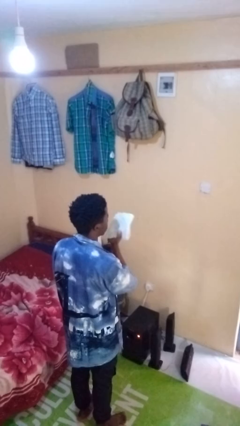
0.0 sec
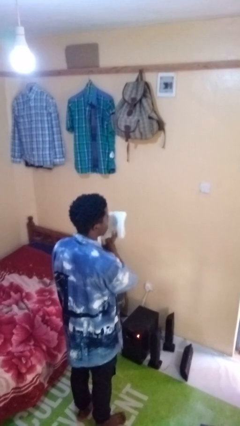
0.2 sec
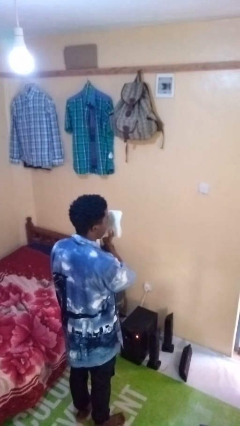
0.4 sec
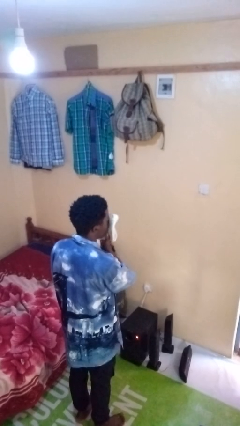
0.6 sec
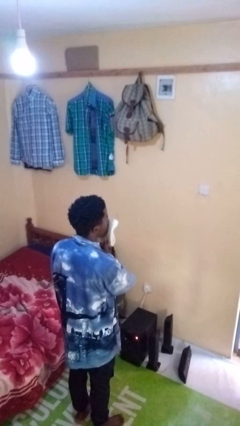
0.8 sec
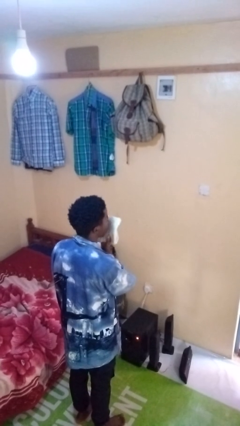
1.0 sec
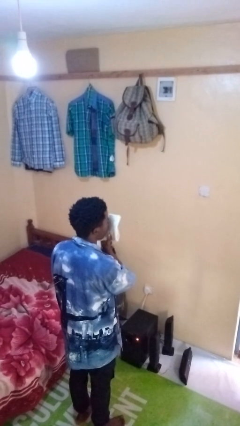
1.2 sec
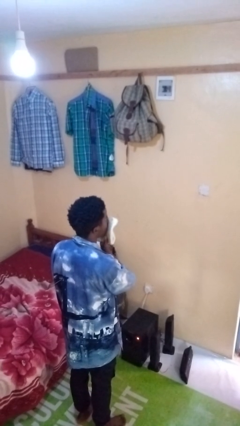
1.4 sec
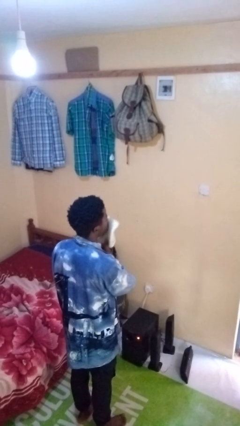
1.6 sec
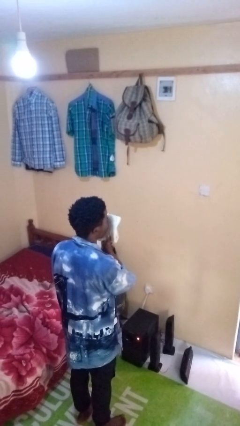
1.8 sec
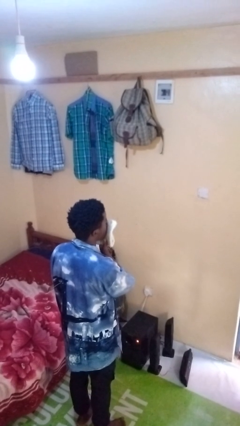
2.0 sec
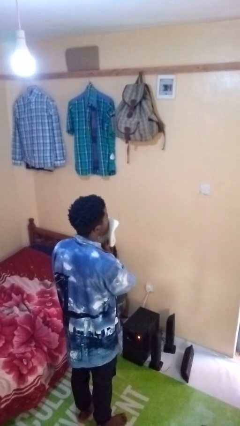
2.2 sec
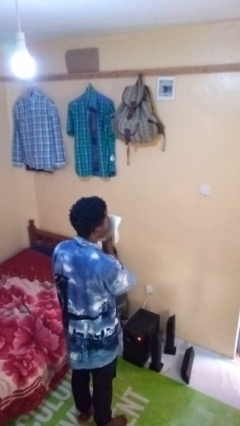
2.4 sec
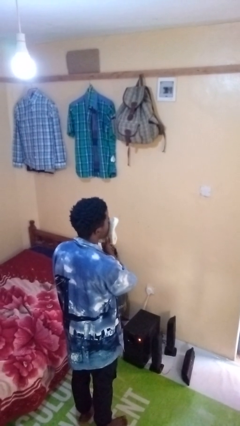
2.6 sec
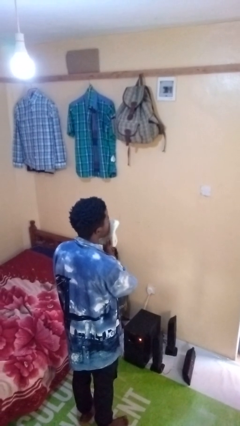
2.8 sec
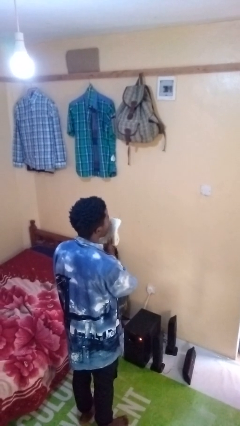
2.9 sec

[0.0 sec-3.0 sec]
person wipes mouth with napkin

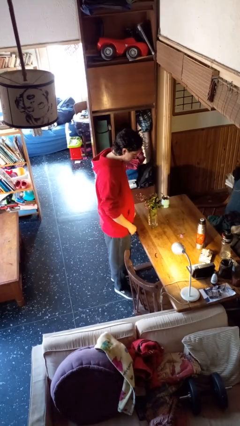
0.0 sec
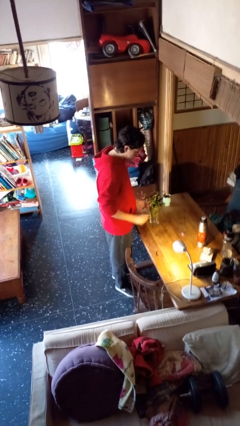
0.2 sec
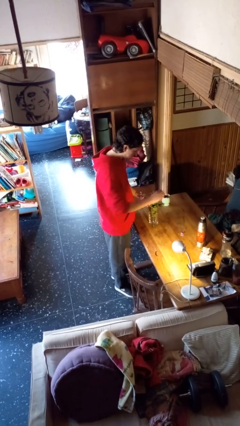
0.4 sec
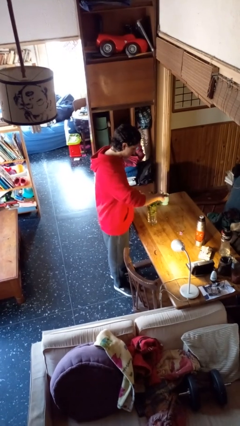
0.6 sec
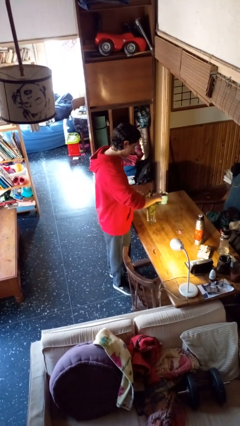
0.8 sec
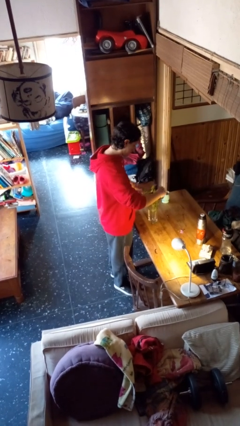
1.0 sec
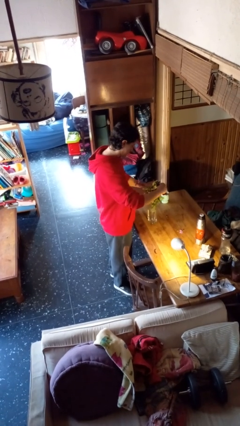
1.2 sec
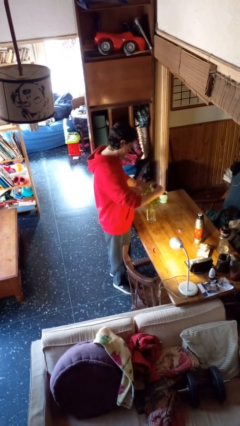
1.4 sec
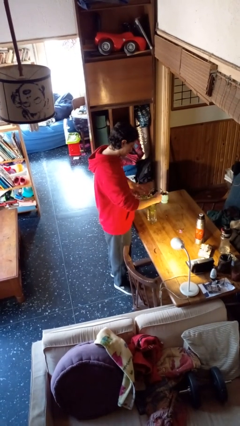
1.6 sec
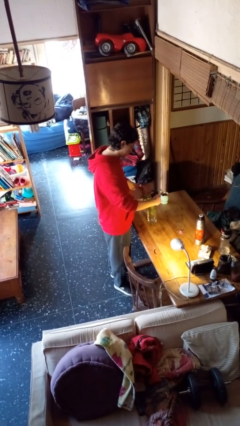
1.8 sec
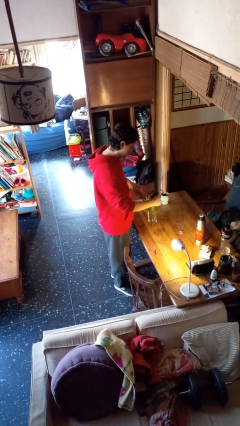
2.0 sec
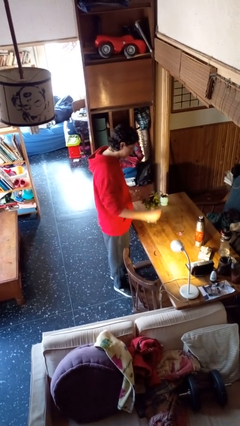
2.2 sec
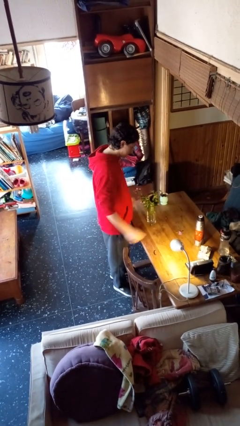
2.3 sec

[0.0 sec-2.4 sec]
person arranges flowers in vase

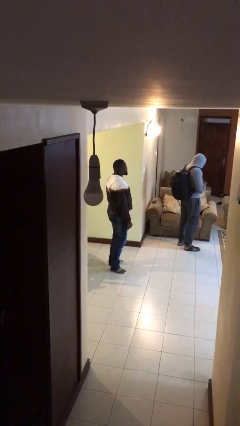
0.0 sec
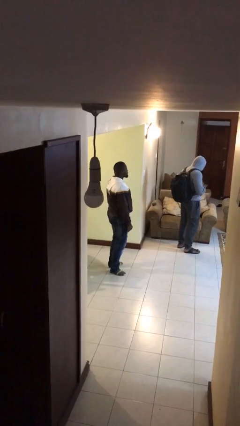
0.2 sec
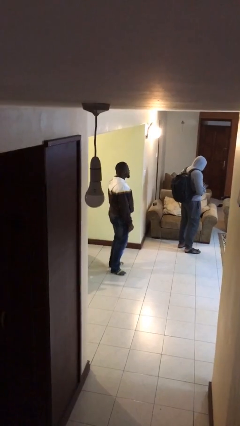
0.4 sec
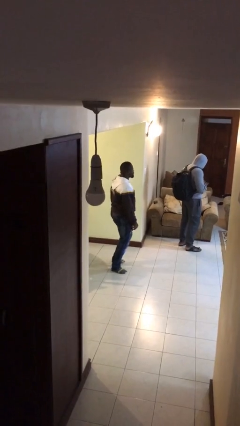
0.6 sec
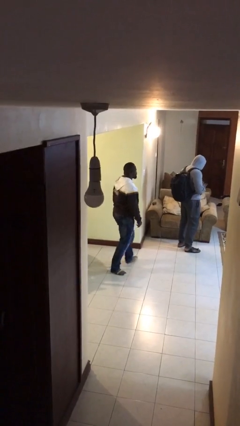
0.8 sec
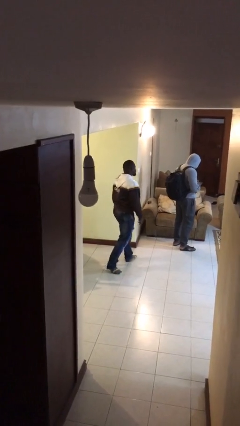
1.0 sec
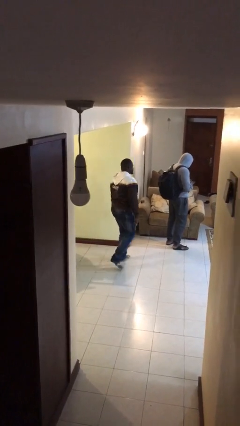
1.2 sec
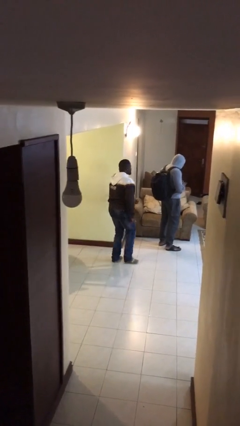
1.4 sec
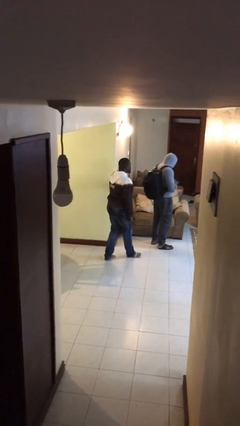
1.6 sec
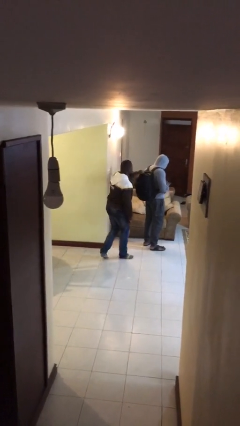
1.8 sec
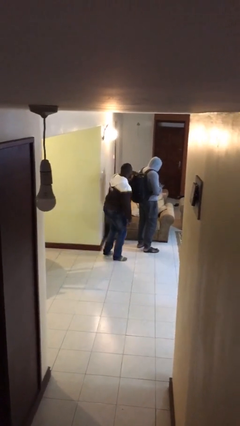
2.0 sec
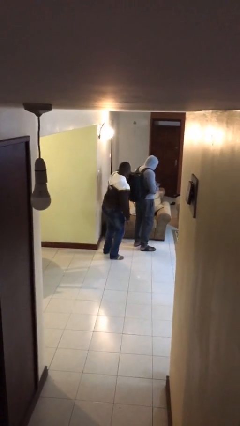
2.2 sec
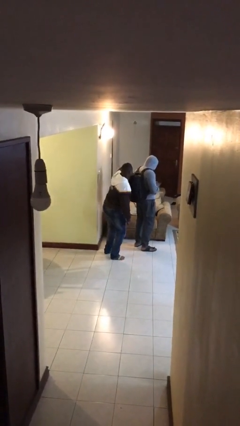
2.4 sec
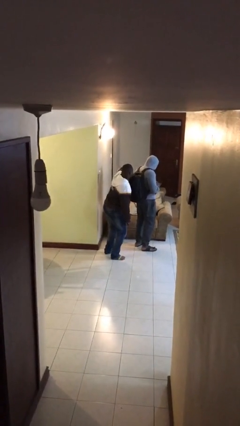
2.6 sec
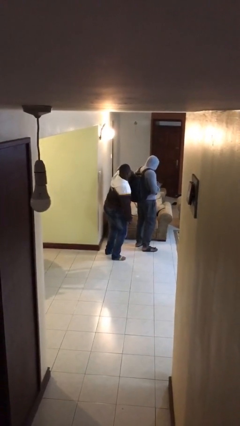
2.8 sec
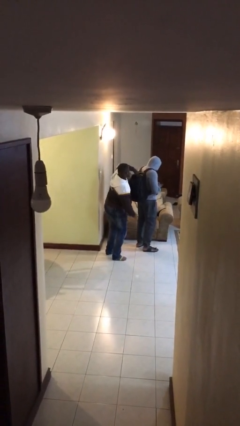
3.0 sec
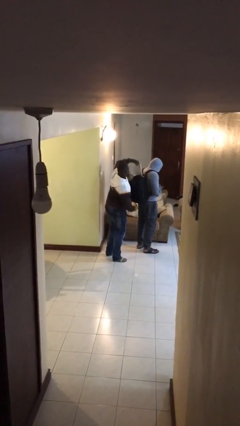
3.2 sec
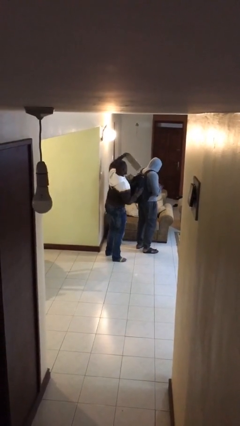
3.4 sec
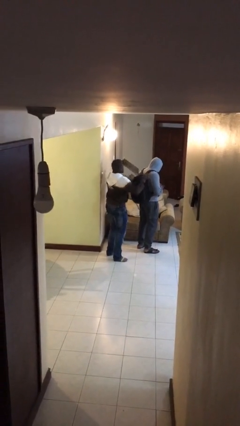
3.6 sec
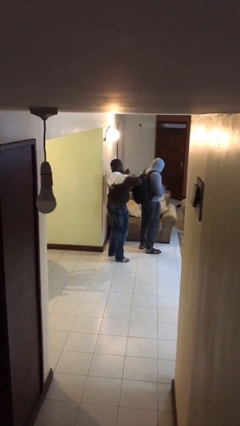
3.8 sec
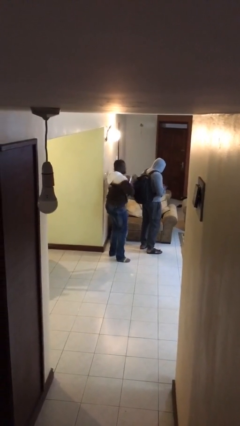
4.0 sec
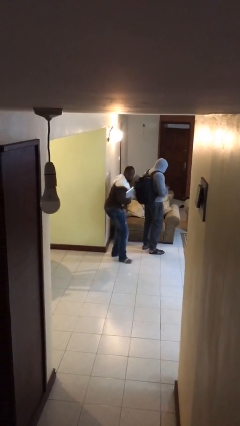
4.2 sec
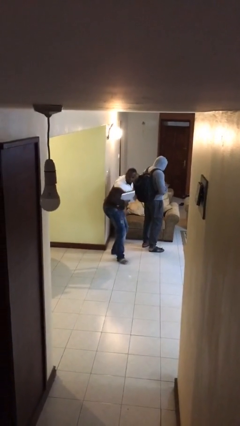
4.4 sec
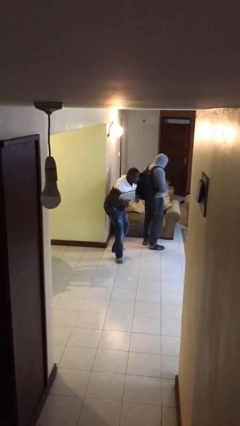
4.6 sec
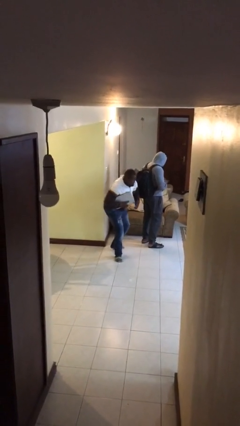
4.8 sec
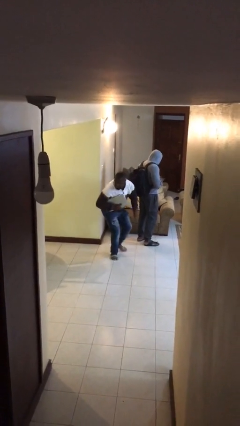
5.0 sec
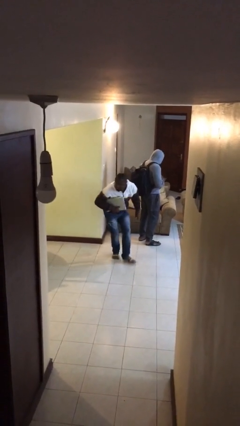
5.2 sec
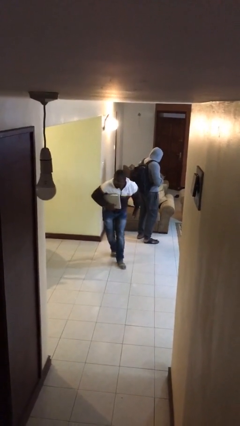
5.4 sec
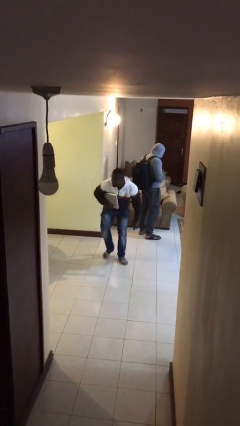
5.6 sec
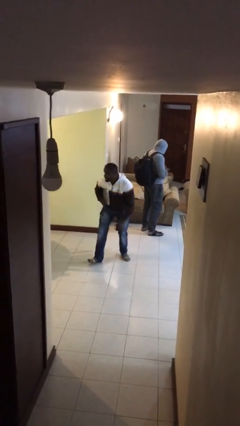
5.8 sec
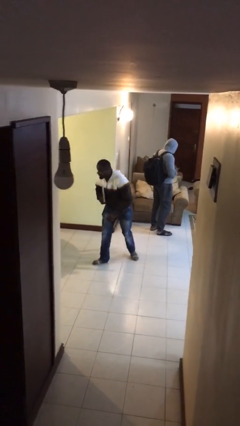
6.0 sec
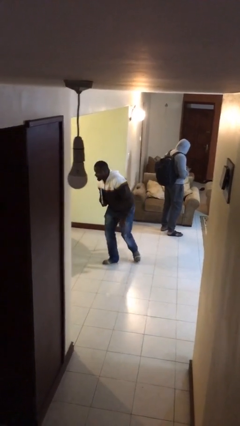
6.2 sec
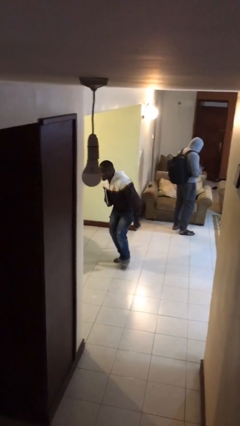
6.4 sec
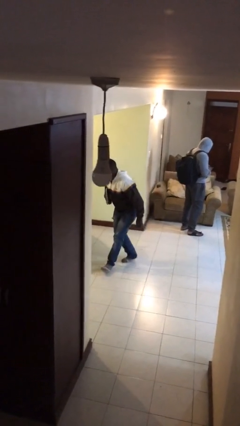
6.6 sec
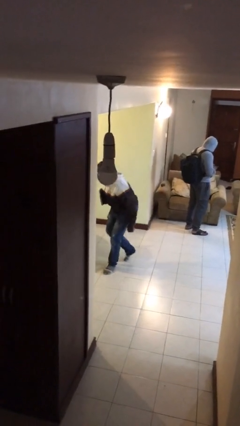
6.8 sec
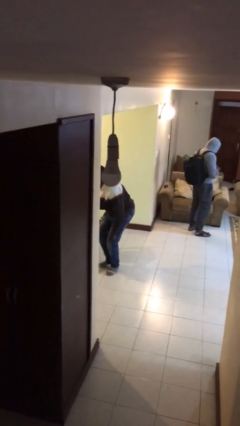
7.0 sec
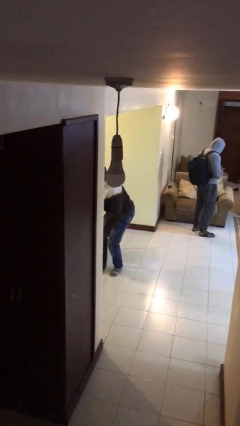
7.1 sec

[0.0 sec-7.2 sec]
person steals object from person

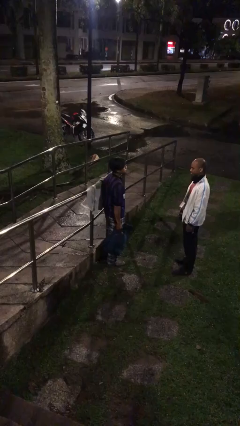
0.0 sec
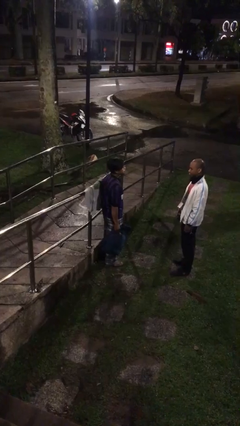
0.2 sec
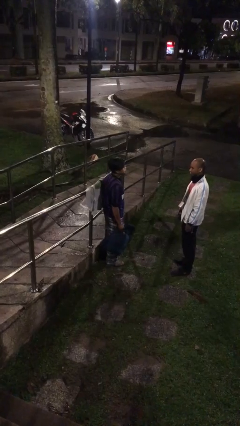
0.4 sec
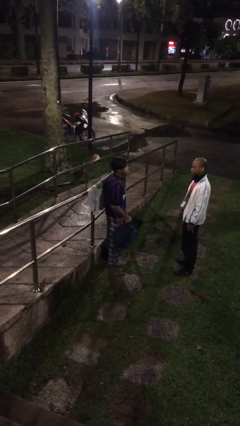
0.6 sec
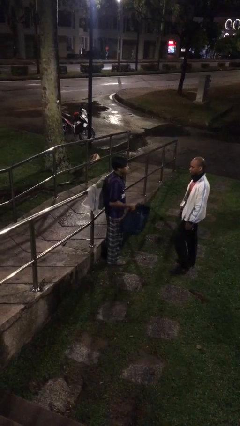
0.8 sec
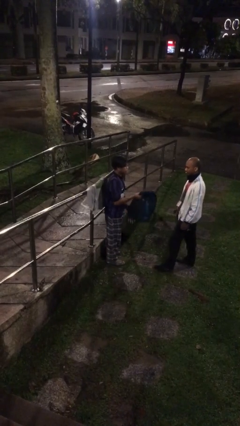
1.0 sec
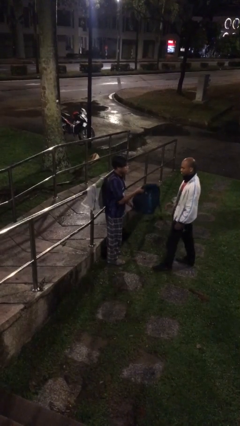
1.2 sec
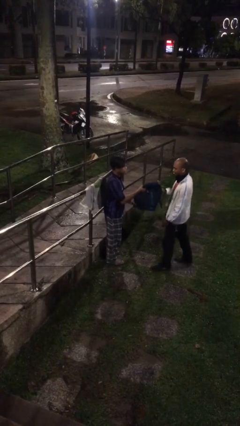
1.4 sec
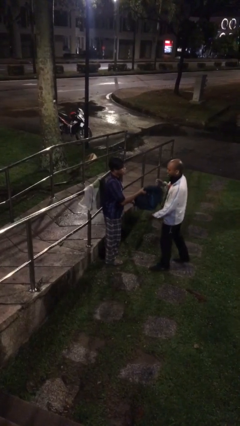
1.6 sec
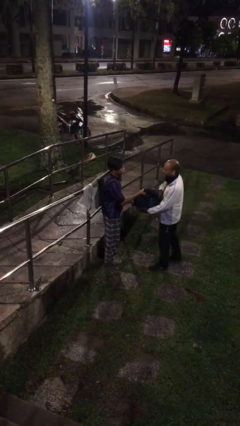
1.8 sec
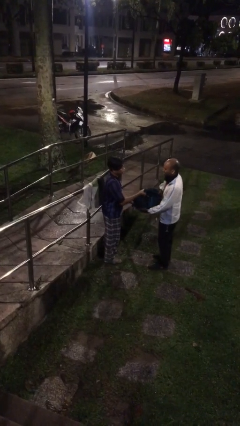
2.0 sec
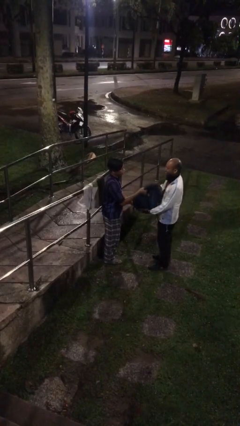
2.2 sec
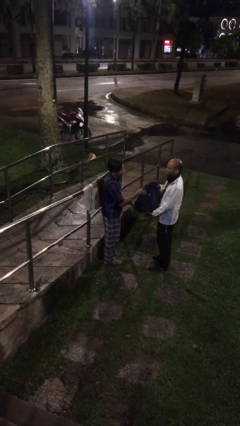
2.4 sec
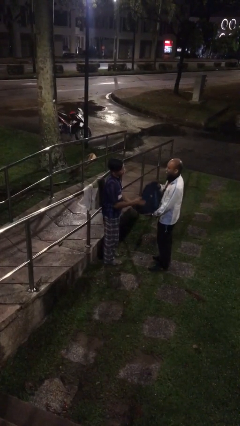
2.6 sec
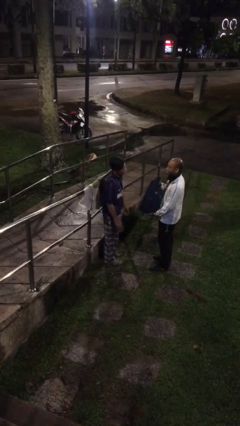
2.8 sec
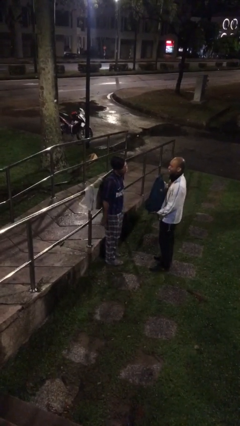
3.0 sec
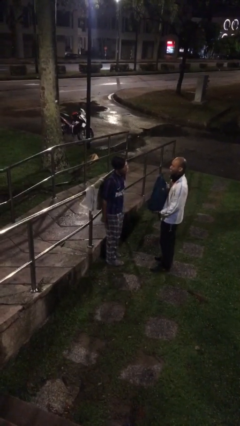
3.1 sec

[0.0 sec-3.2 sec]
person transfers object to person

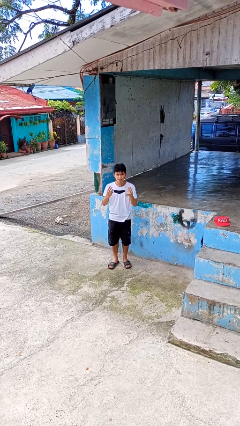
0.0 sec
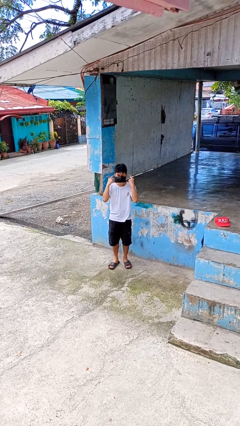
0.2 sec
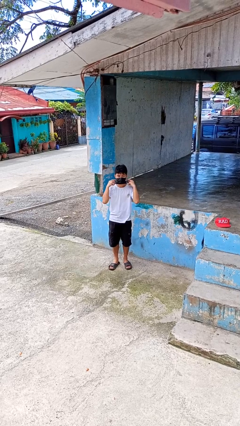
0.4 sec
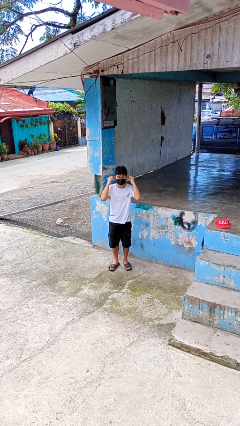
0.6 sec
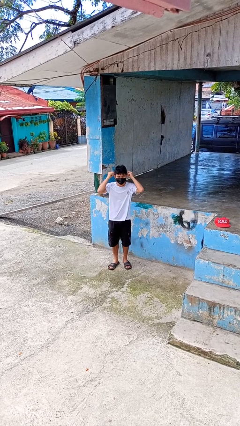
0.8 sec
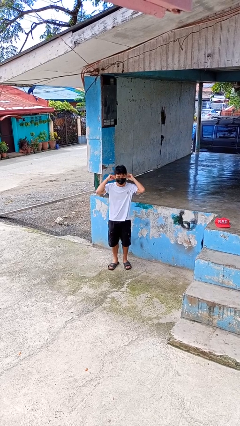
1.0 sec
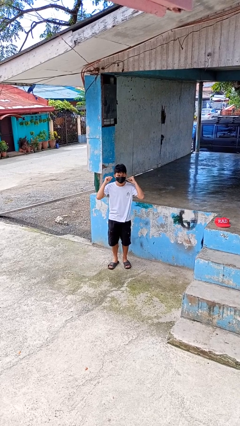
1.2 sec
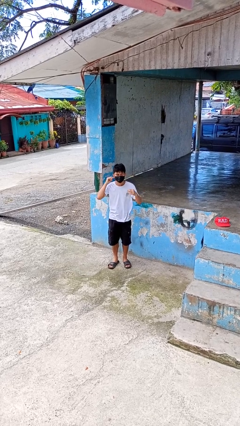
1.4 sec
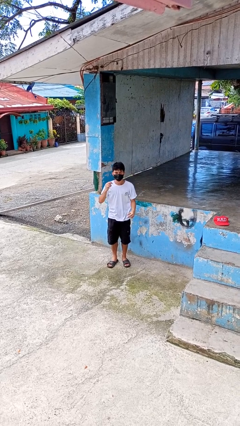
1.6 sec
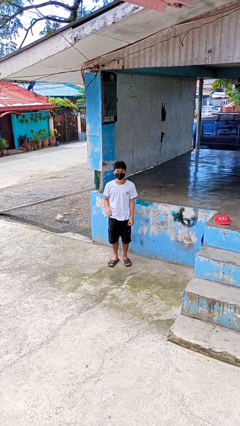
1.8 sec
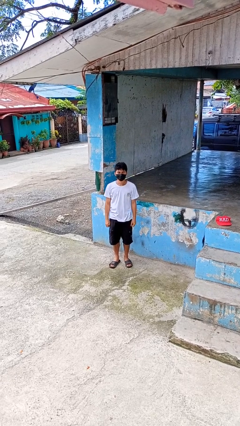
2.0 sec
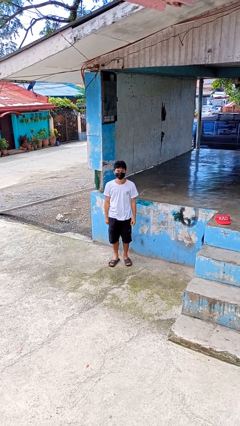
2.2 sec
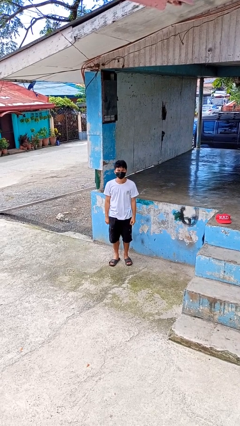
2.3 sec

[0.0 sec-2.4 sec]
person puts on facemask
